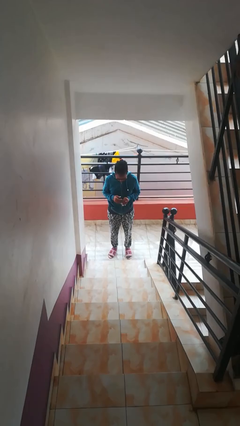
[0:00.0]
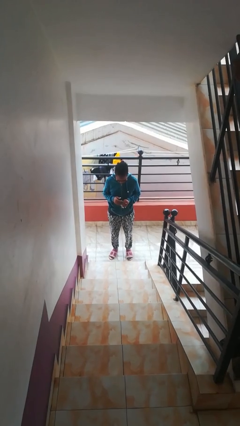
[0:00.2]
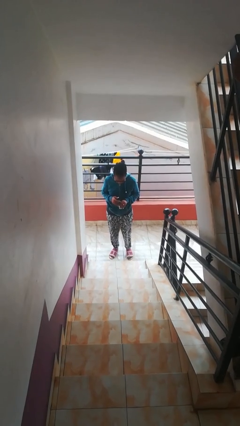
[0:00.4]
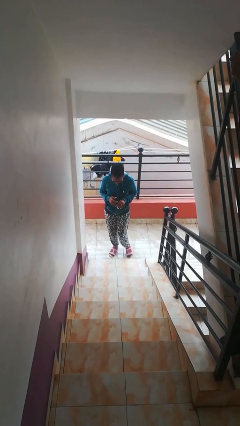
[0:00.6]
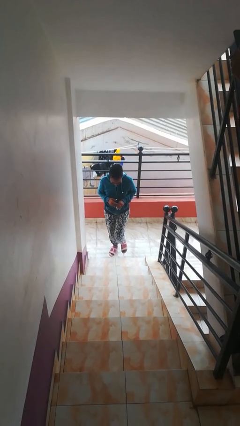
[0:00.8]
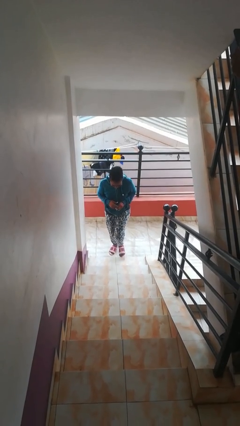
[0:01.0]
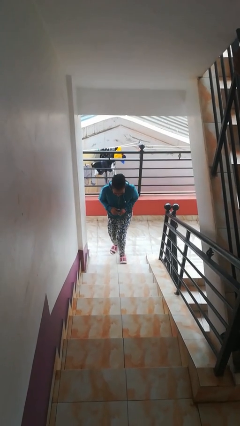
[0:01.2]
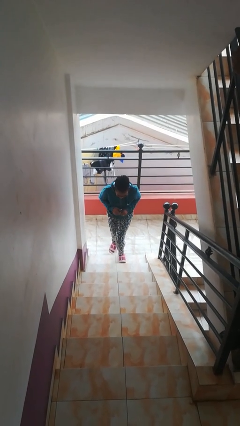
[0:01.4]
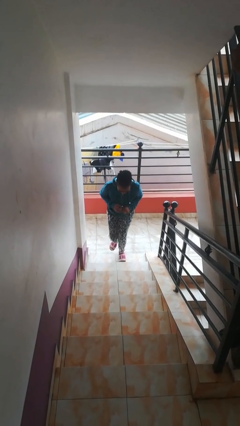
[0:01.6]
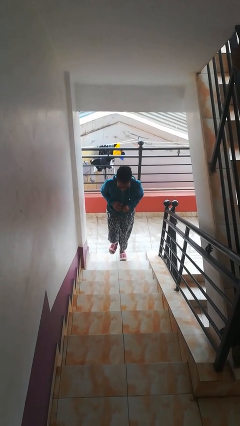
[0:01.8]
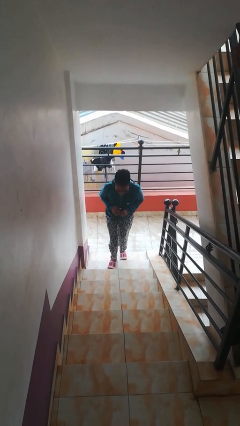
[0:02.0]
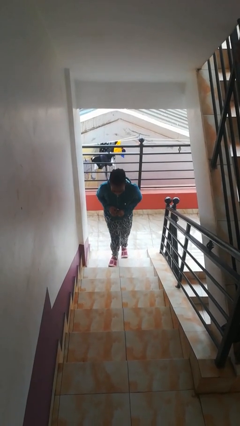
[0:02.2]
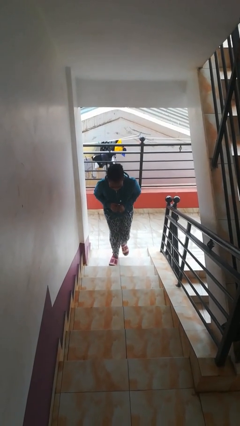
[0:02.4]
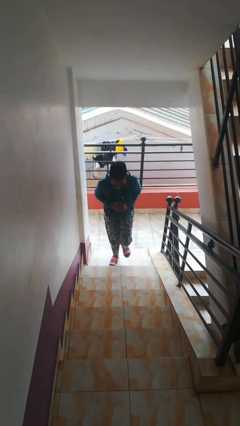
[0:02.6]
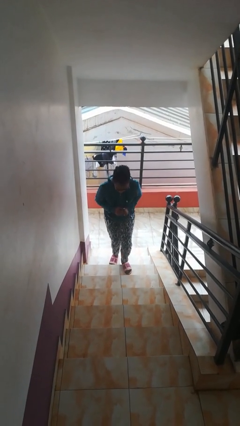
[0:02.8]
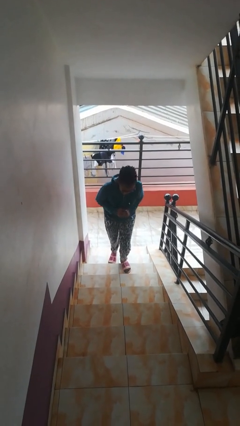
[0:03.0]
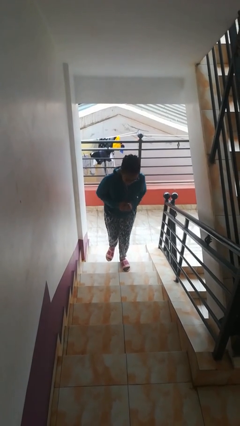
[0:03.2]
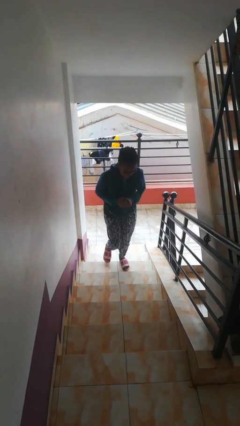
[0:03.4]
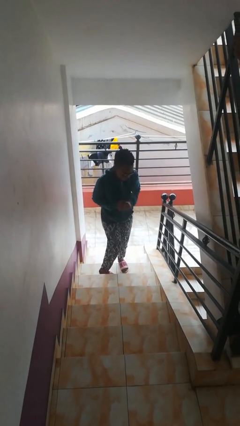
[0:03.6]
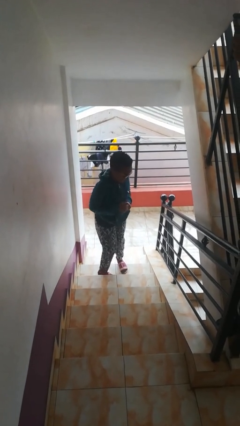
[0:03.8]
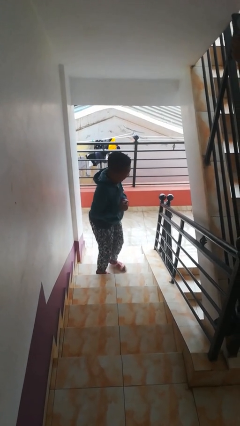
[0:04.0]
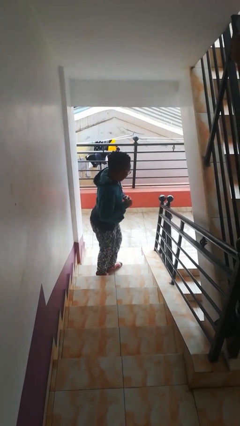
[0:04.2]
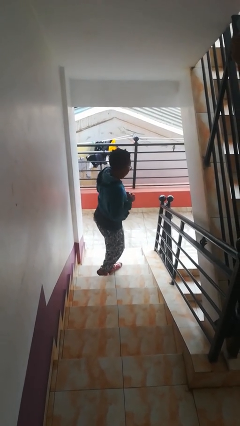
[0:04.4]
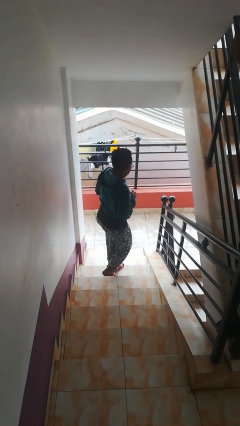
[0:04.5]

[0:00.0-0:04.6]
person climbs up stairs

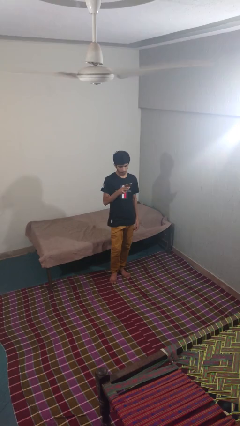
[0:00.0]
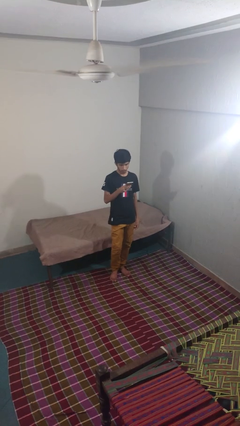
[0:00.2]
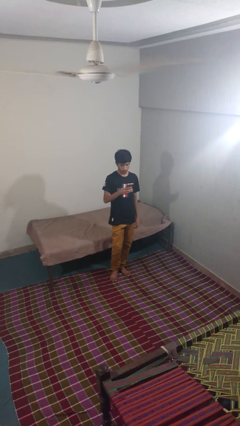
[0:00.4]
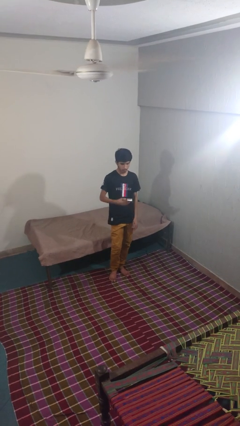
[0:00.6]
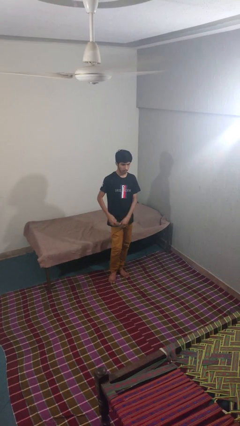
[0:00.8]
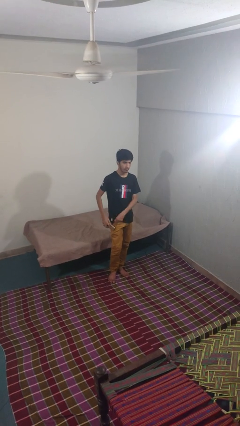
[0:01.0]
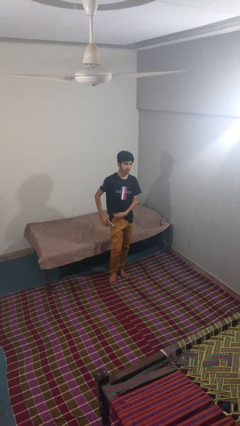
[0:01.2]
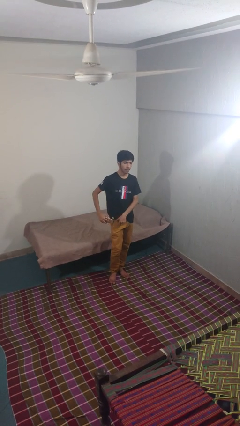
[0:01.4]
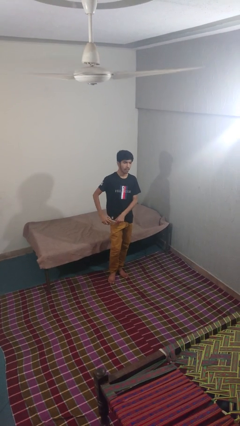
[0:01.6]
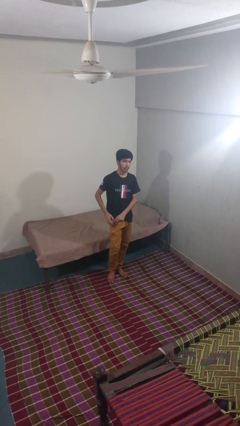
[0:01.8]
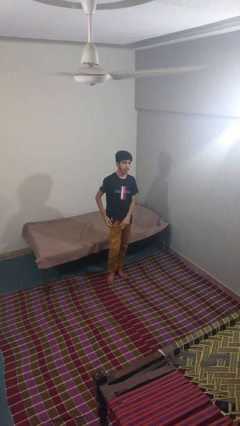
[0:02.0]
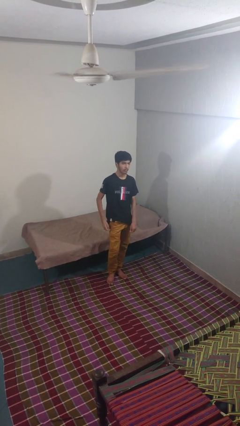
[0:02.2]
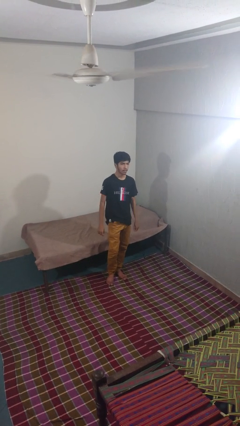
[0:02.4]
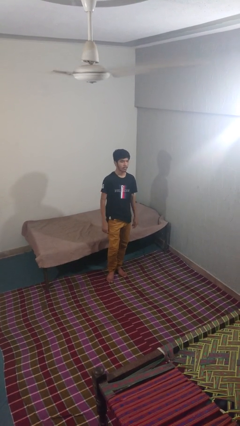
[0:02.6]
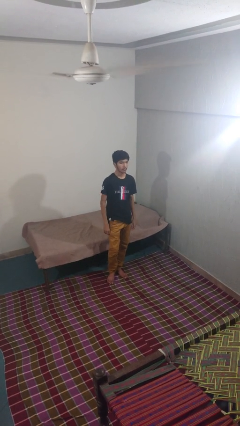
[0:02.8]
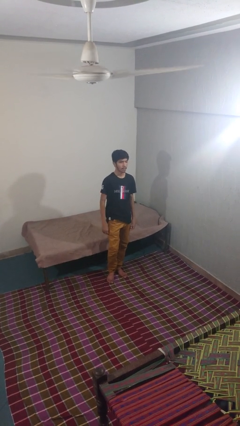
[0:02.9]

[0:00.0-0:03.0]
person puts phone into pocket

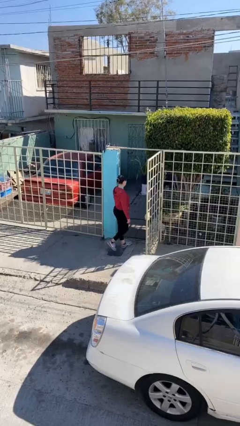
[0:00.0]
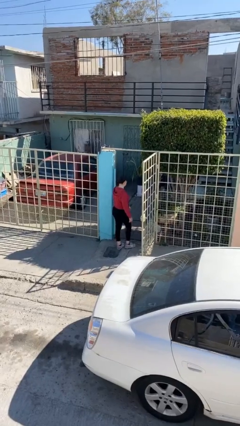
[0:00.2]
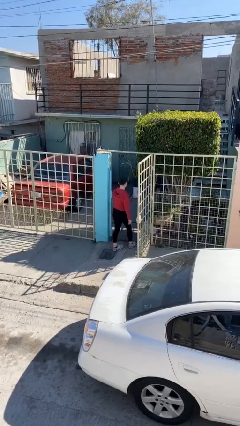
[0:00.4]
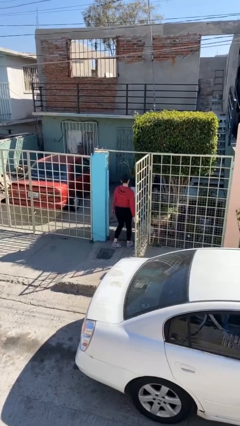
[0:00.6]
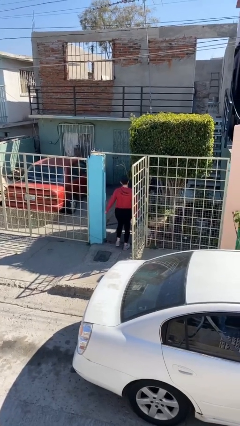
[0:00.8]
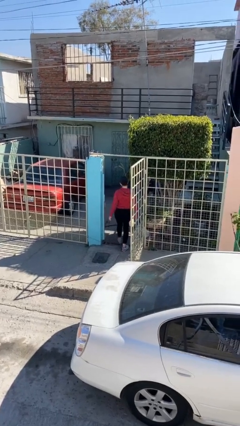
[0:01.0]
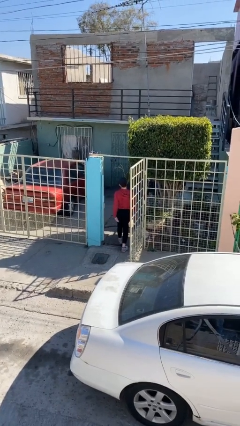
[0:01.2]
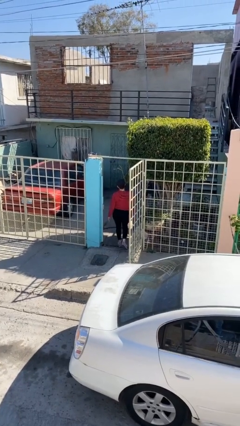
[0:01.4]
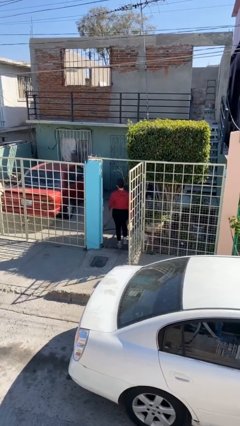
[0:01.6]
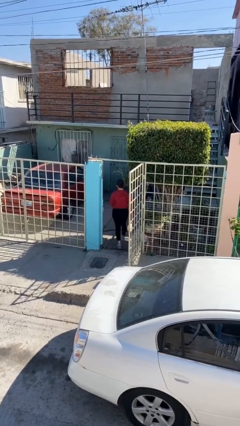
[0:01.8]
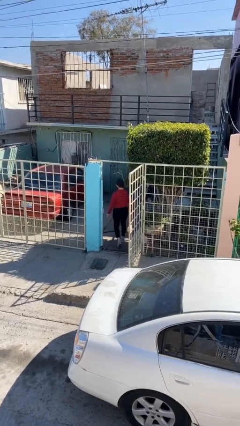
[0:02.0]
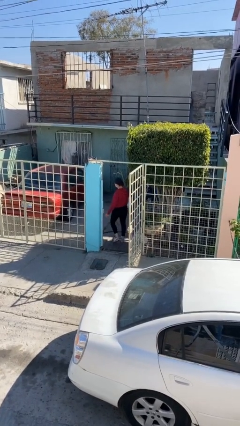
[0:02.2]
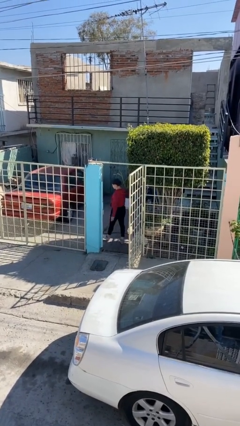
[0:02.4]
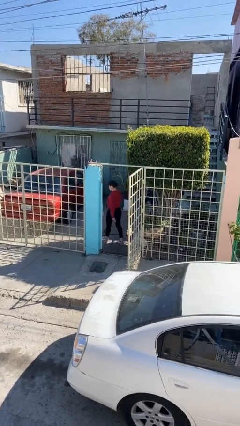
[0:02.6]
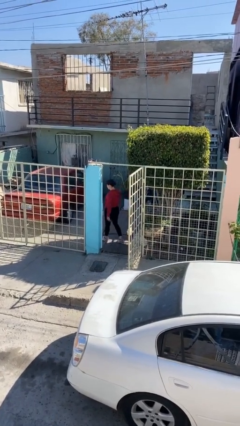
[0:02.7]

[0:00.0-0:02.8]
person exits scene through structure

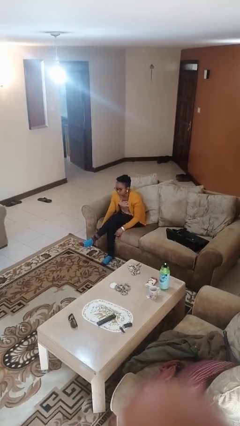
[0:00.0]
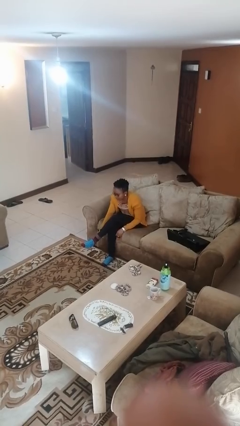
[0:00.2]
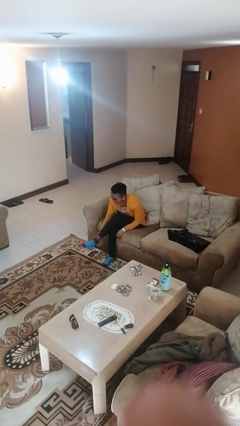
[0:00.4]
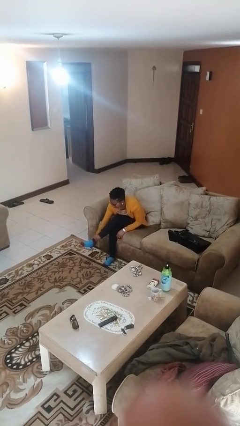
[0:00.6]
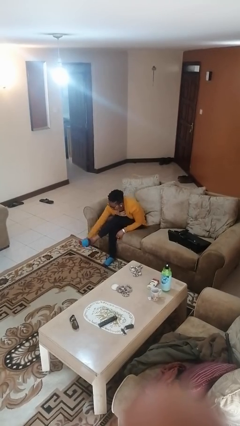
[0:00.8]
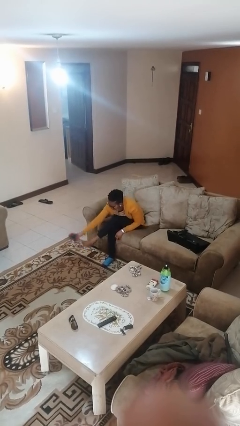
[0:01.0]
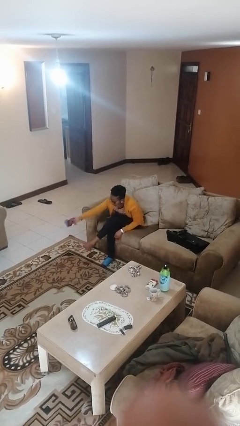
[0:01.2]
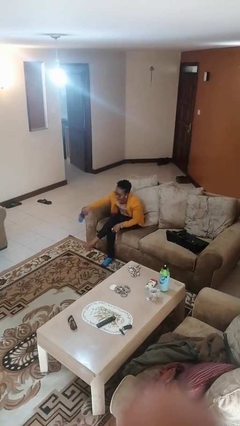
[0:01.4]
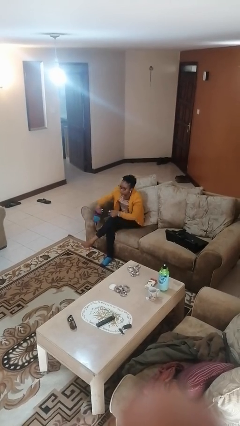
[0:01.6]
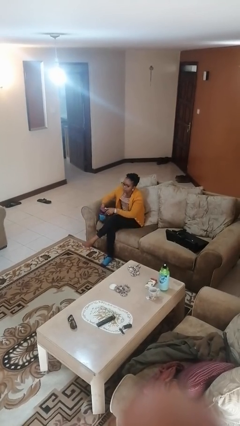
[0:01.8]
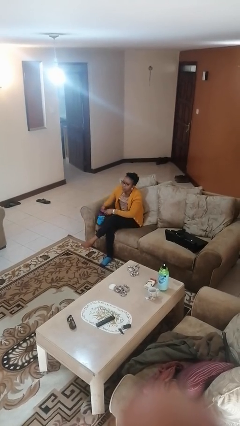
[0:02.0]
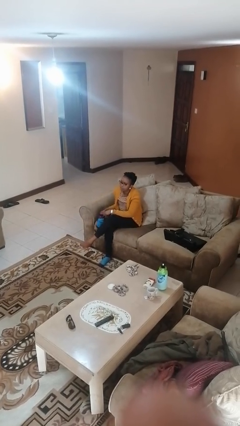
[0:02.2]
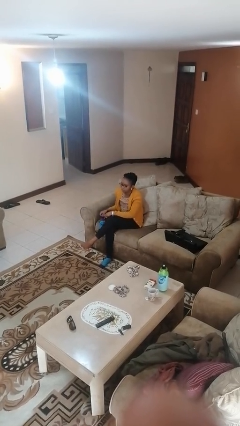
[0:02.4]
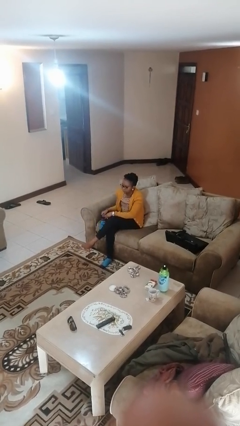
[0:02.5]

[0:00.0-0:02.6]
person takes off socks

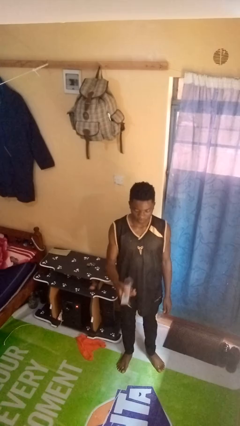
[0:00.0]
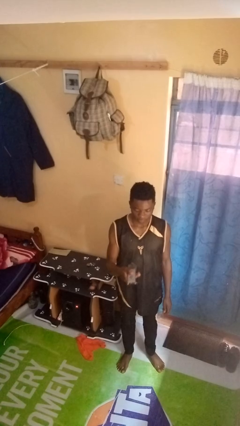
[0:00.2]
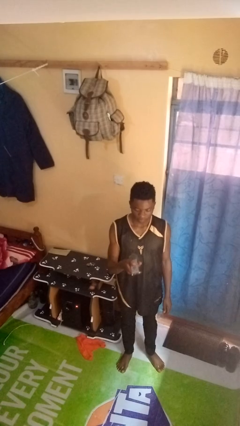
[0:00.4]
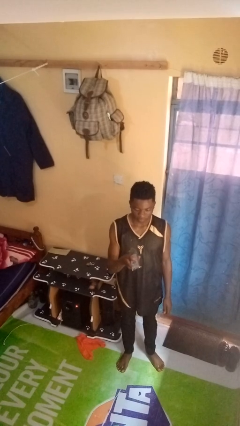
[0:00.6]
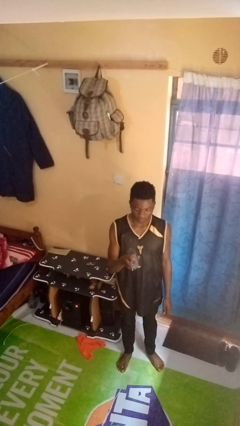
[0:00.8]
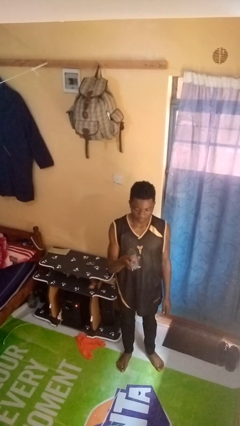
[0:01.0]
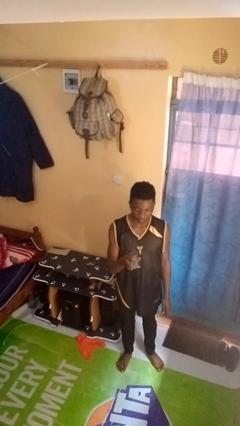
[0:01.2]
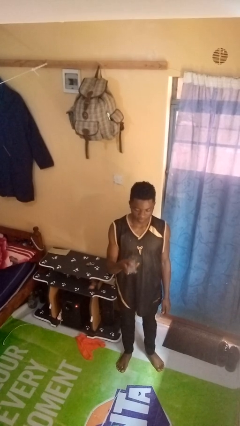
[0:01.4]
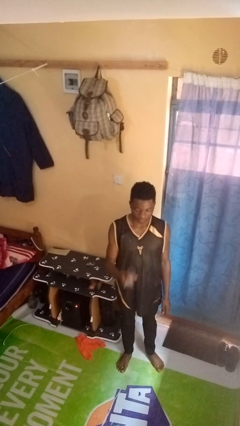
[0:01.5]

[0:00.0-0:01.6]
person uses television remote

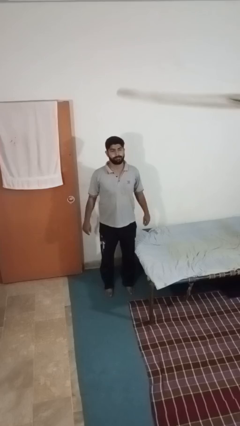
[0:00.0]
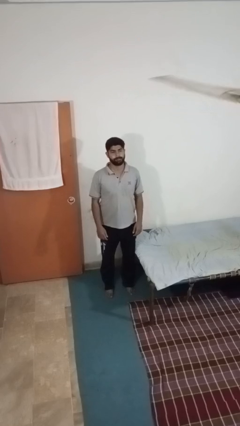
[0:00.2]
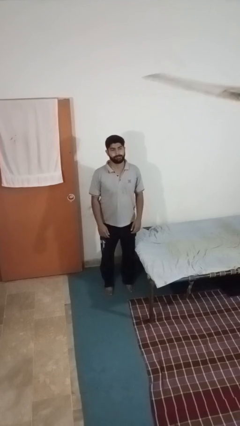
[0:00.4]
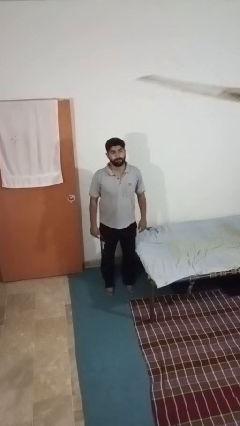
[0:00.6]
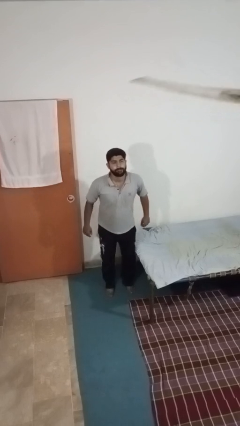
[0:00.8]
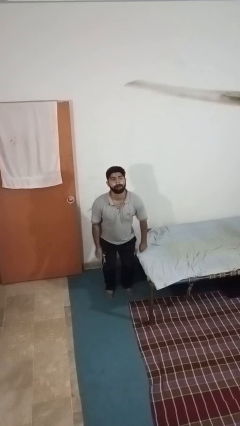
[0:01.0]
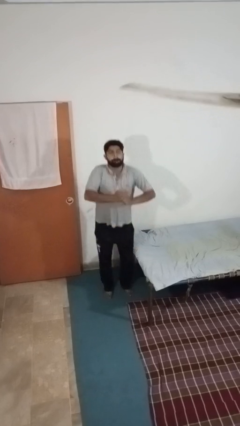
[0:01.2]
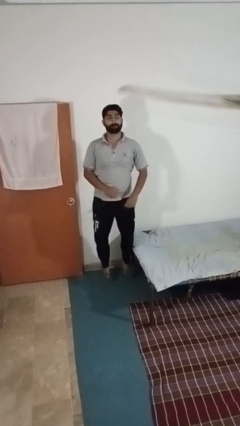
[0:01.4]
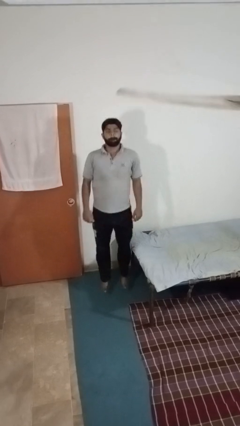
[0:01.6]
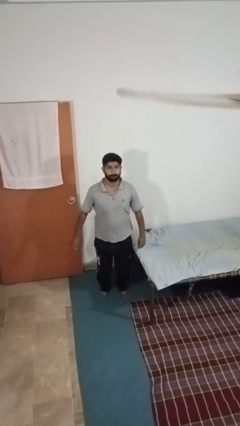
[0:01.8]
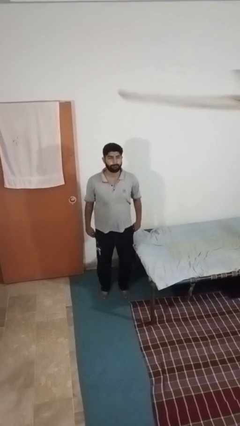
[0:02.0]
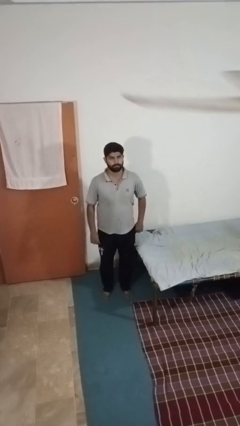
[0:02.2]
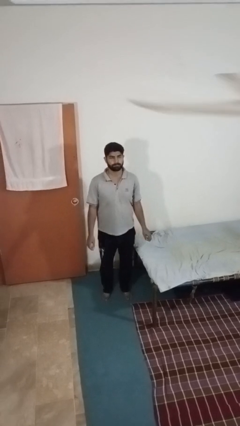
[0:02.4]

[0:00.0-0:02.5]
person jumps
